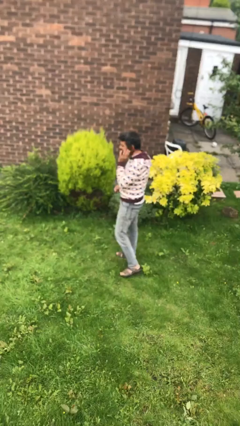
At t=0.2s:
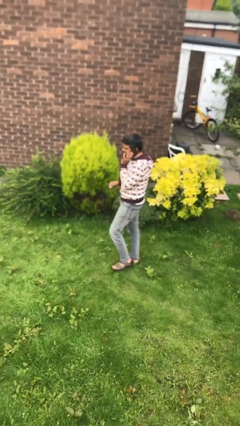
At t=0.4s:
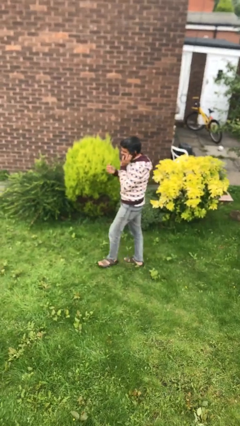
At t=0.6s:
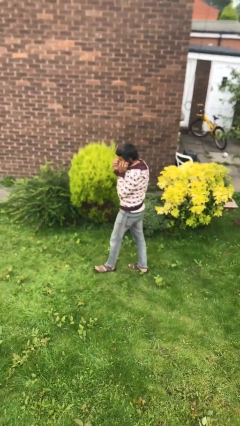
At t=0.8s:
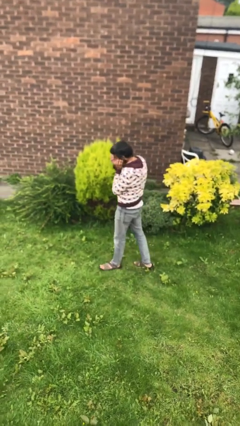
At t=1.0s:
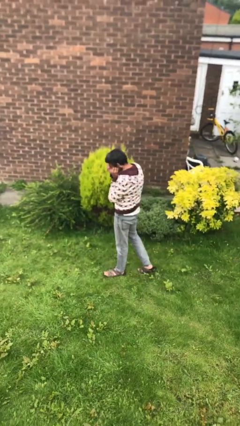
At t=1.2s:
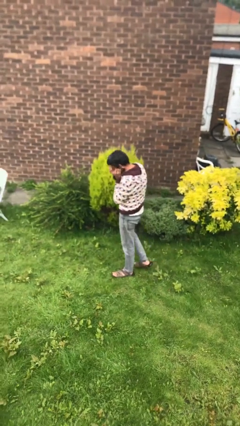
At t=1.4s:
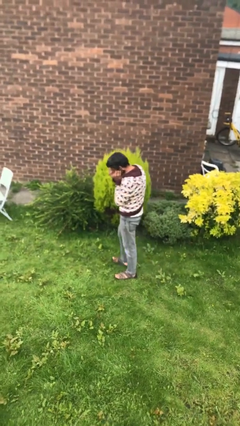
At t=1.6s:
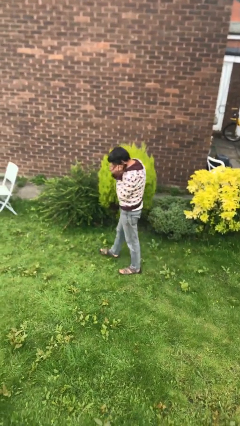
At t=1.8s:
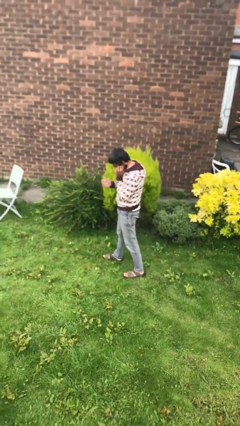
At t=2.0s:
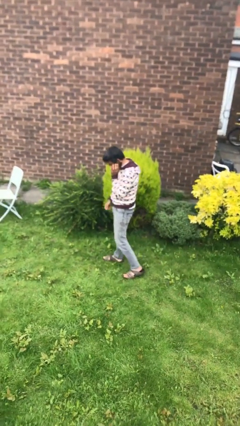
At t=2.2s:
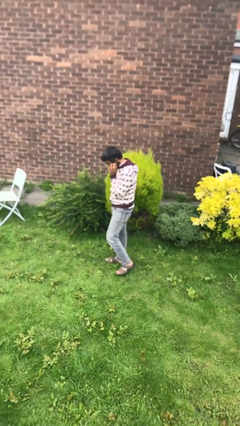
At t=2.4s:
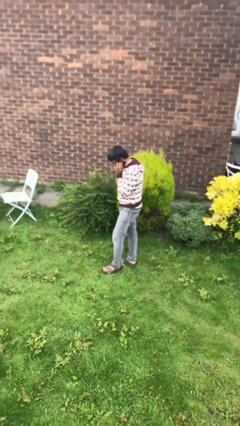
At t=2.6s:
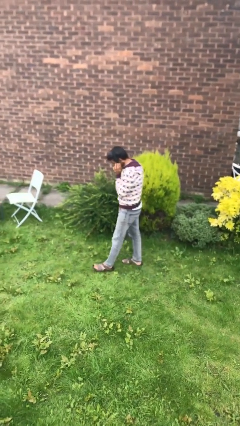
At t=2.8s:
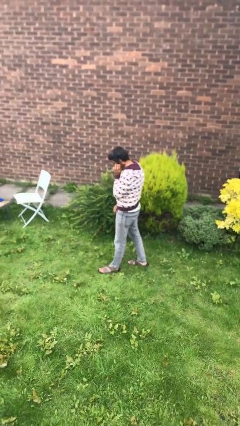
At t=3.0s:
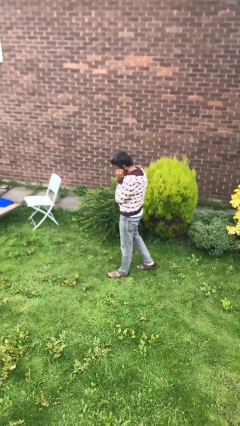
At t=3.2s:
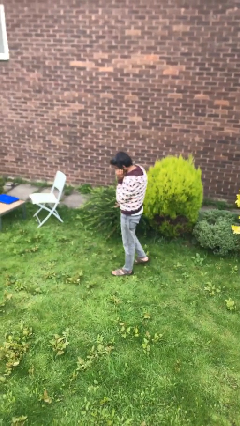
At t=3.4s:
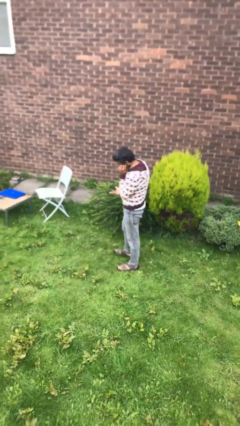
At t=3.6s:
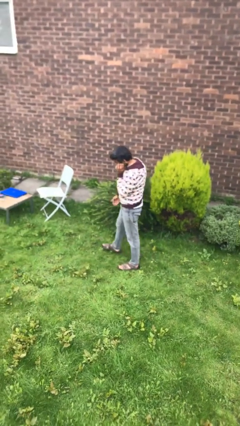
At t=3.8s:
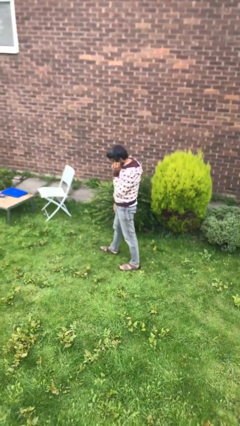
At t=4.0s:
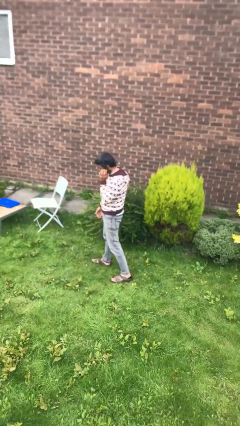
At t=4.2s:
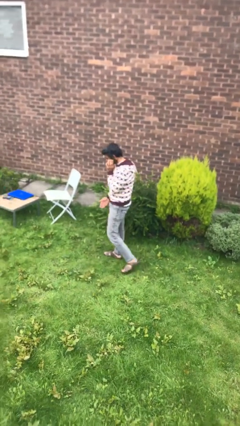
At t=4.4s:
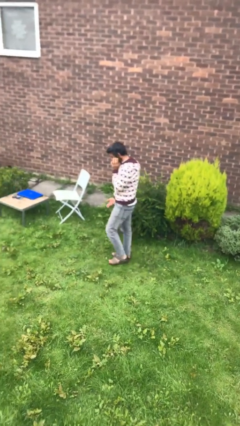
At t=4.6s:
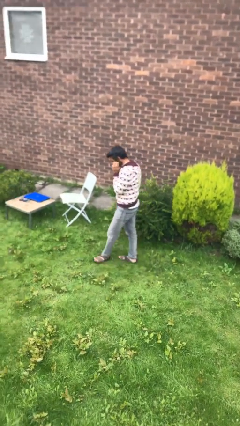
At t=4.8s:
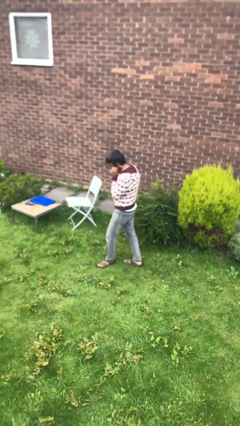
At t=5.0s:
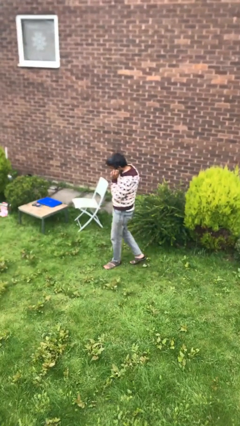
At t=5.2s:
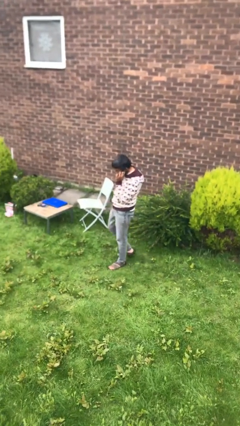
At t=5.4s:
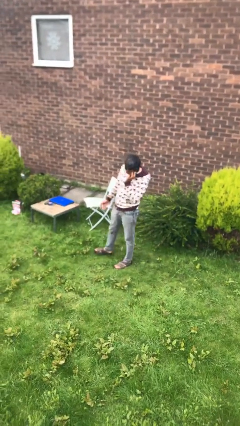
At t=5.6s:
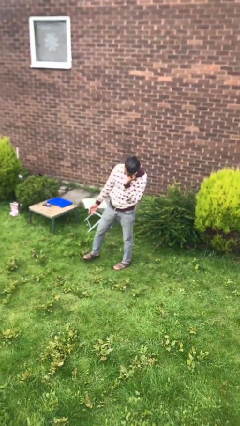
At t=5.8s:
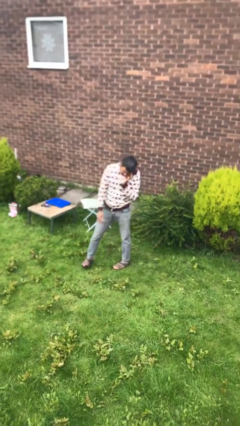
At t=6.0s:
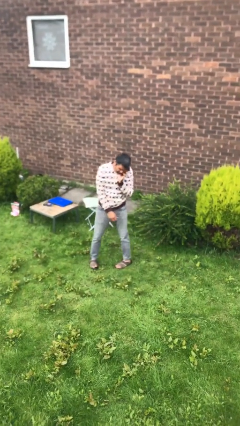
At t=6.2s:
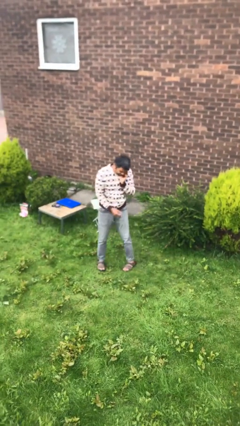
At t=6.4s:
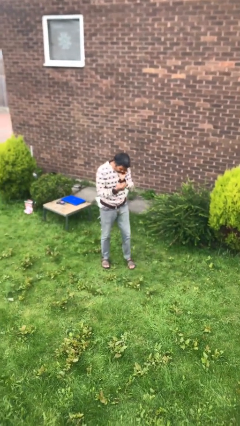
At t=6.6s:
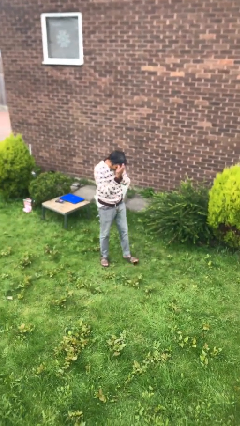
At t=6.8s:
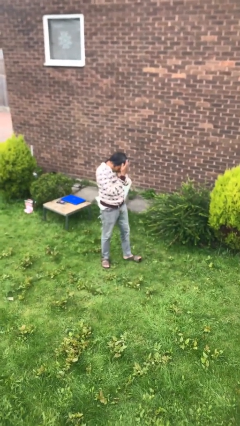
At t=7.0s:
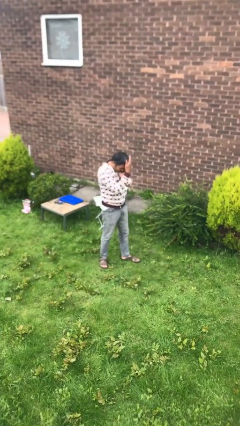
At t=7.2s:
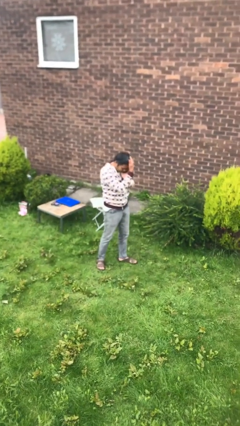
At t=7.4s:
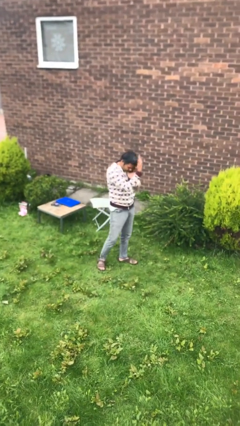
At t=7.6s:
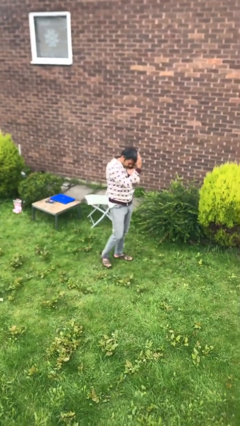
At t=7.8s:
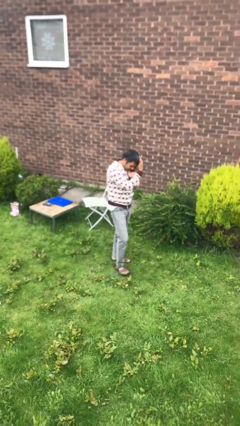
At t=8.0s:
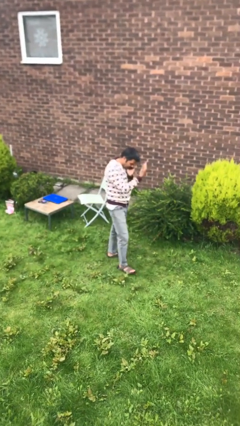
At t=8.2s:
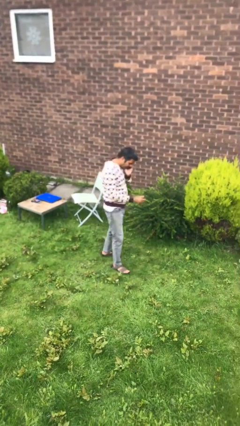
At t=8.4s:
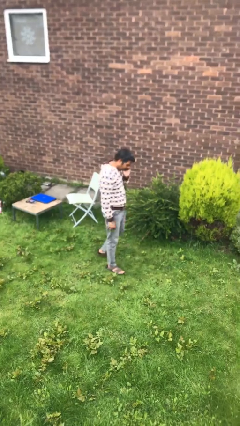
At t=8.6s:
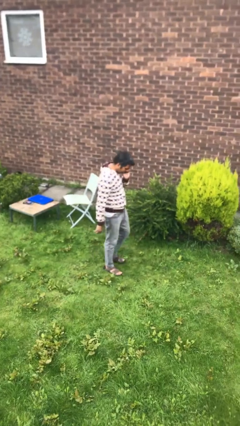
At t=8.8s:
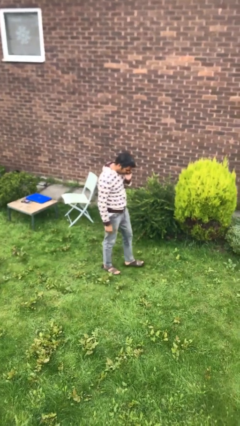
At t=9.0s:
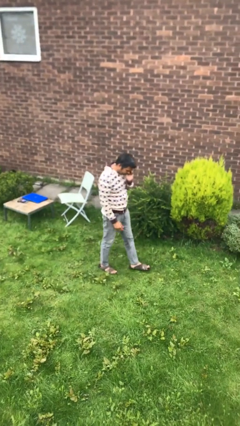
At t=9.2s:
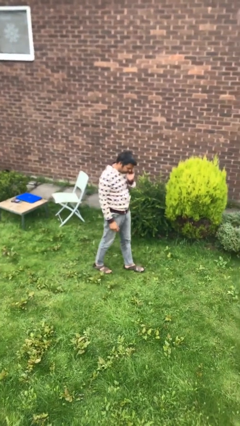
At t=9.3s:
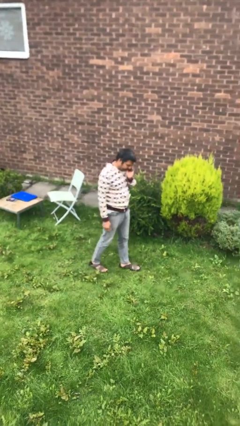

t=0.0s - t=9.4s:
person talks on phone

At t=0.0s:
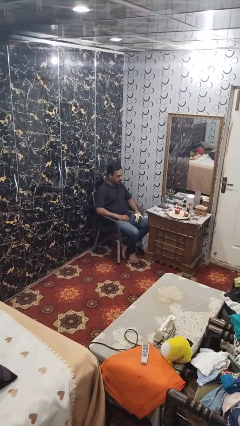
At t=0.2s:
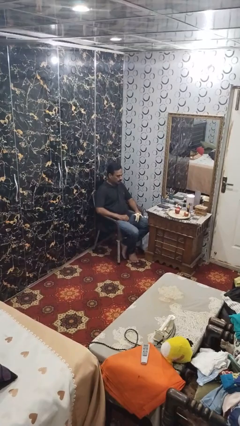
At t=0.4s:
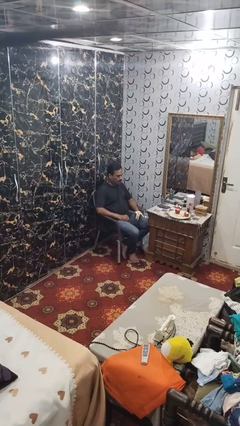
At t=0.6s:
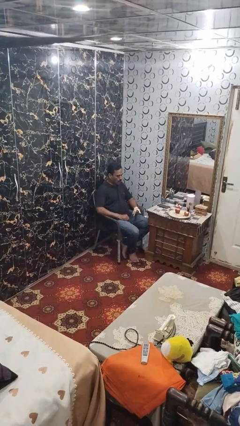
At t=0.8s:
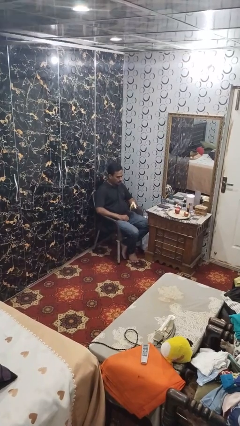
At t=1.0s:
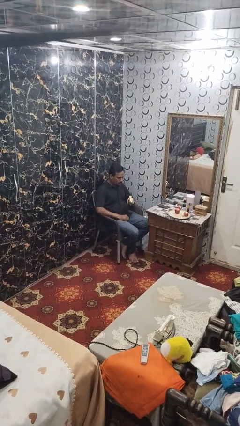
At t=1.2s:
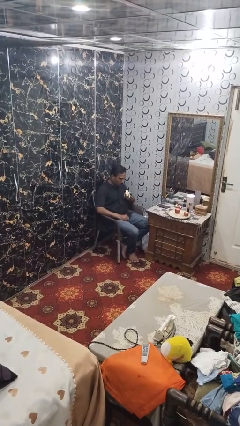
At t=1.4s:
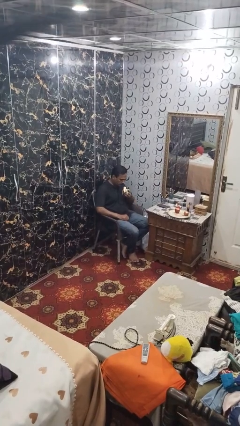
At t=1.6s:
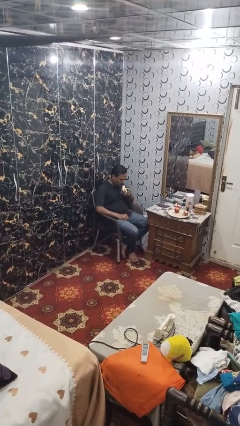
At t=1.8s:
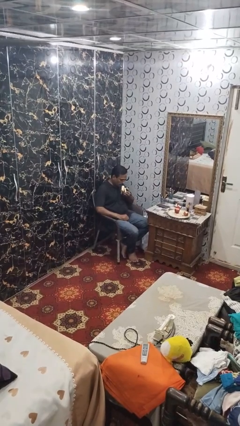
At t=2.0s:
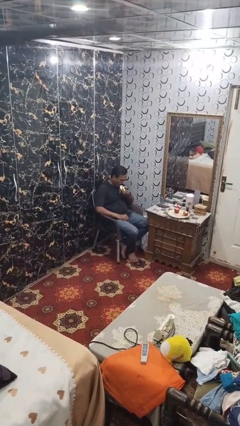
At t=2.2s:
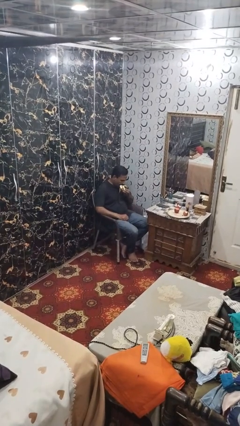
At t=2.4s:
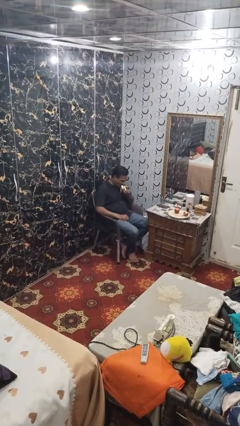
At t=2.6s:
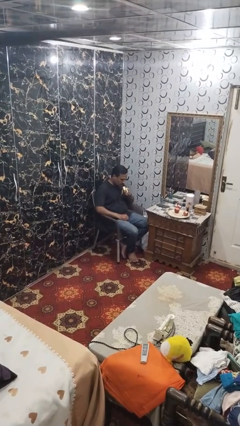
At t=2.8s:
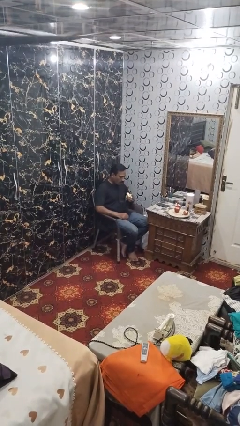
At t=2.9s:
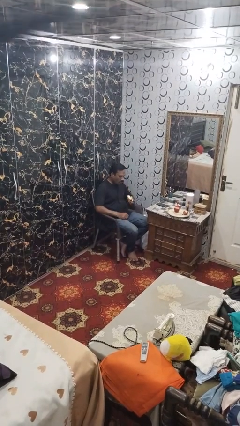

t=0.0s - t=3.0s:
person eats banana

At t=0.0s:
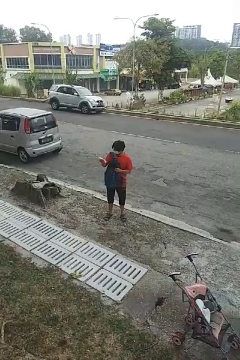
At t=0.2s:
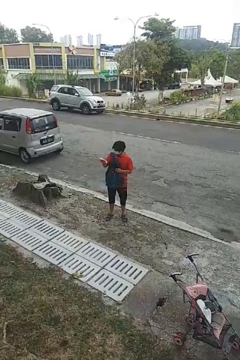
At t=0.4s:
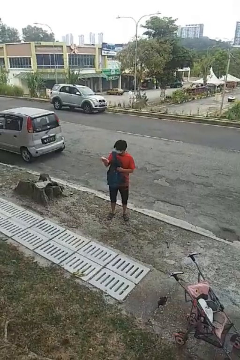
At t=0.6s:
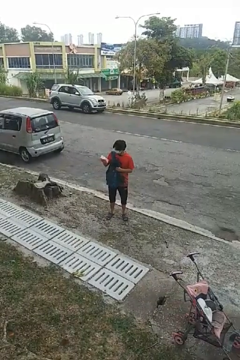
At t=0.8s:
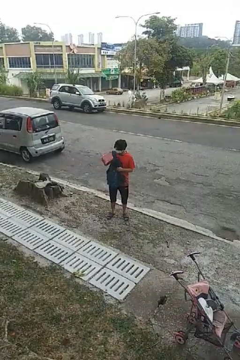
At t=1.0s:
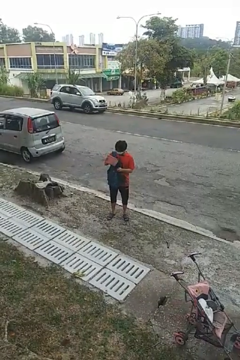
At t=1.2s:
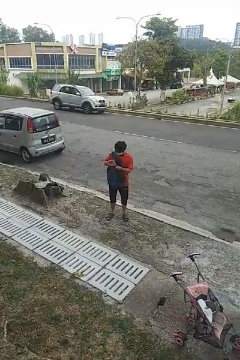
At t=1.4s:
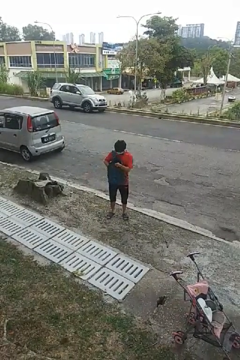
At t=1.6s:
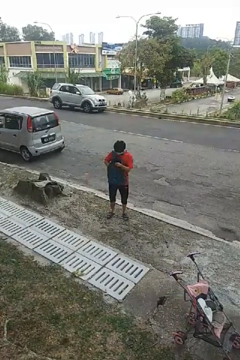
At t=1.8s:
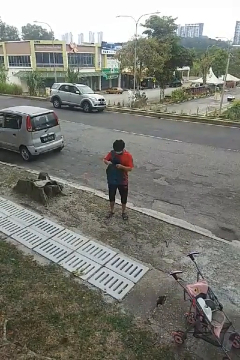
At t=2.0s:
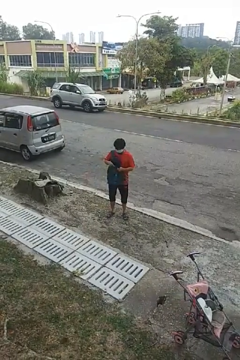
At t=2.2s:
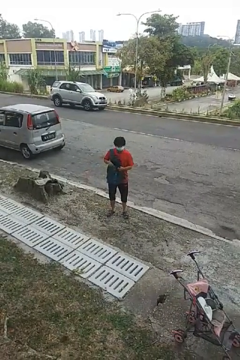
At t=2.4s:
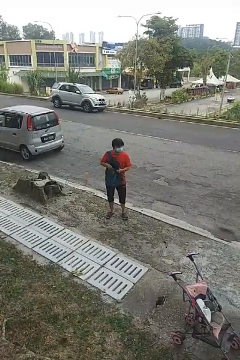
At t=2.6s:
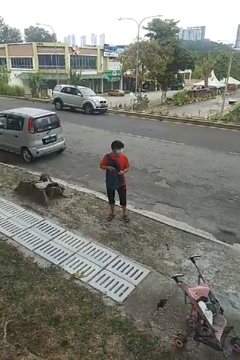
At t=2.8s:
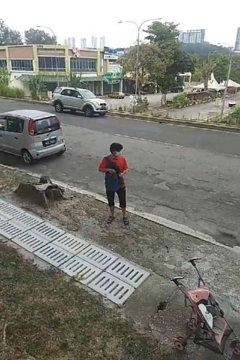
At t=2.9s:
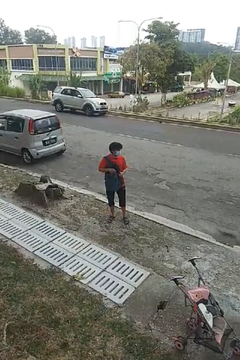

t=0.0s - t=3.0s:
person puts object into backpack

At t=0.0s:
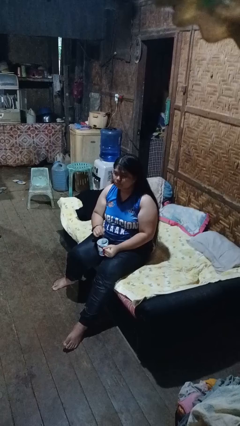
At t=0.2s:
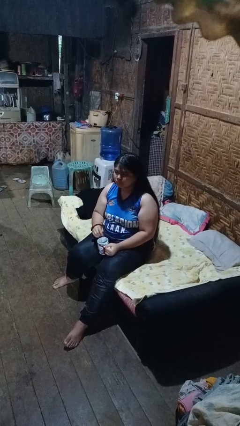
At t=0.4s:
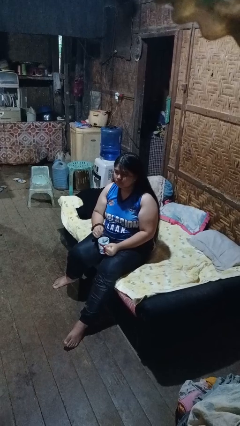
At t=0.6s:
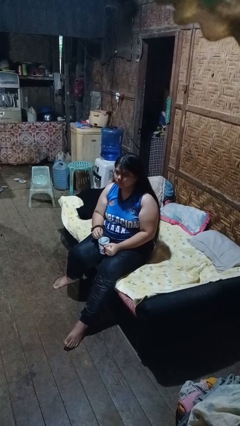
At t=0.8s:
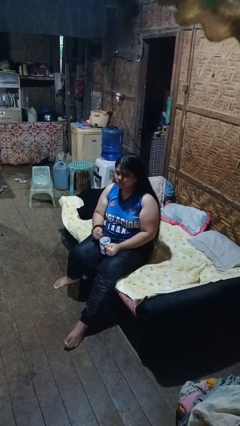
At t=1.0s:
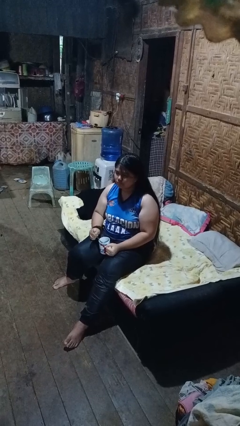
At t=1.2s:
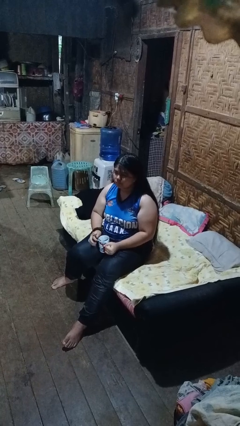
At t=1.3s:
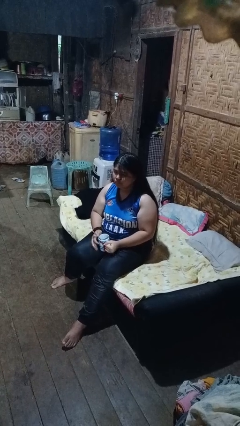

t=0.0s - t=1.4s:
person stirs mug

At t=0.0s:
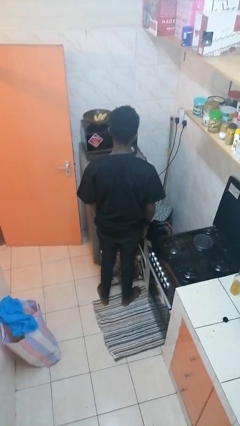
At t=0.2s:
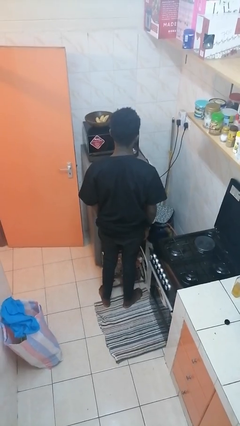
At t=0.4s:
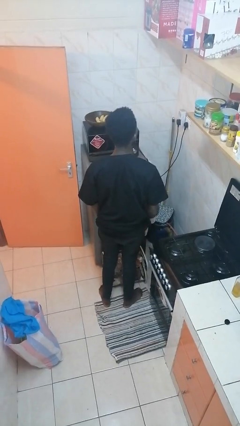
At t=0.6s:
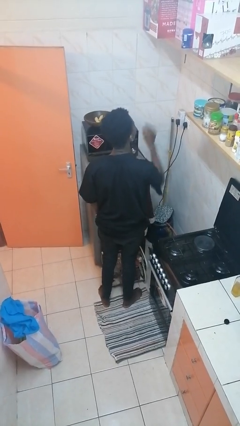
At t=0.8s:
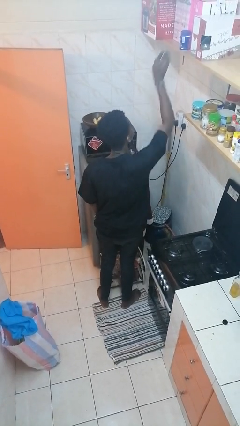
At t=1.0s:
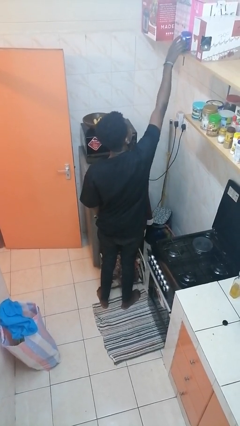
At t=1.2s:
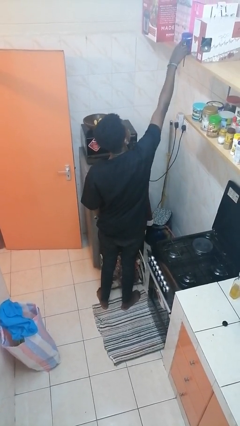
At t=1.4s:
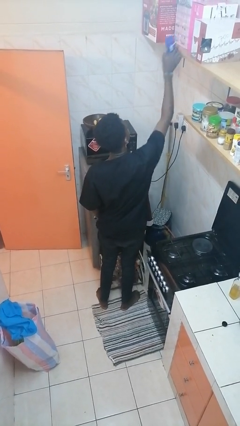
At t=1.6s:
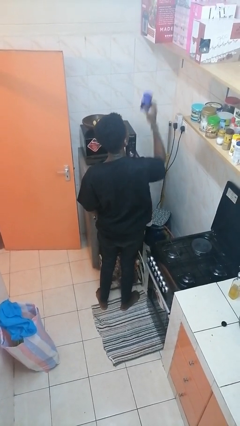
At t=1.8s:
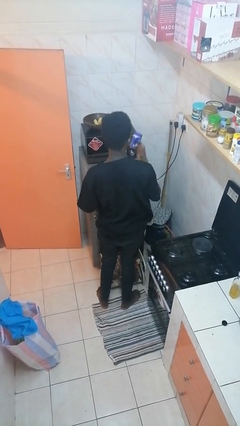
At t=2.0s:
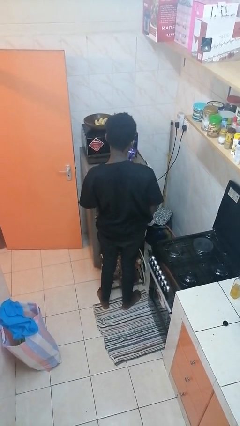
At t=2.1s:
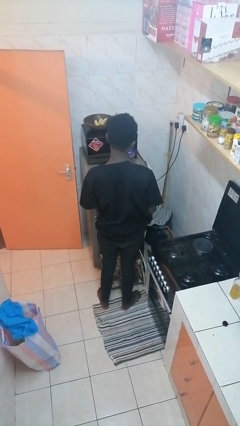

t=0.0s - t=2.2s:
person picks up object from shelf
